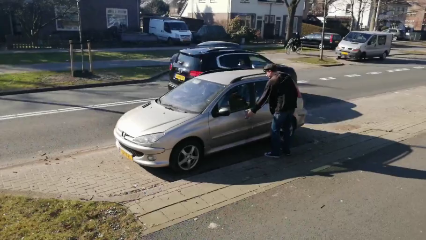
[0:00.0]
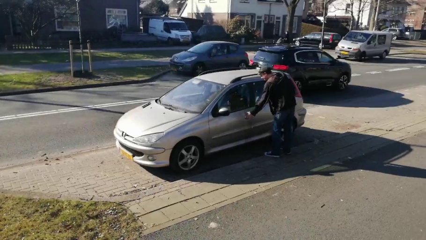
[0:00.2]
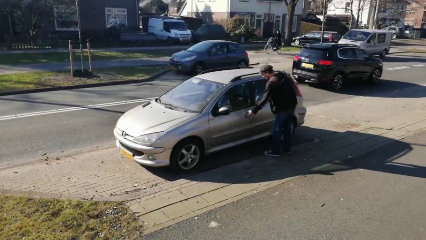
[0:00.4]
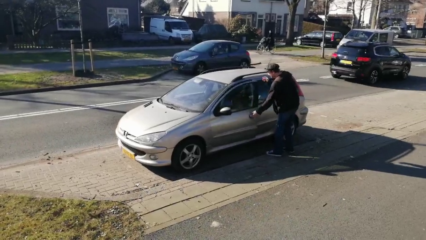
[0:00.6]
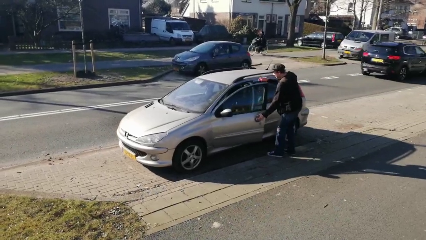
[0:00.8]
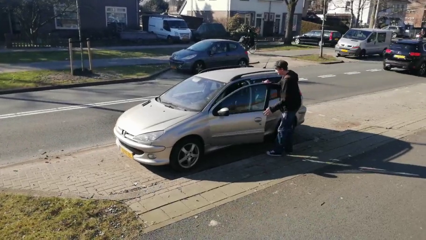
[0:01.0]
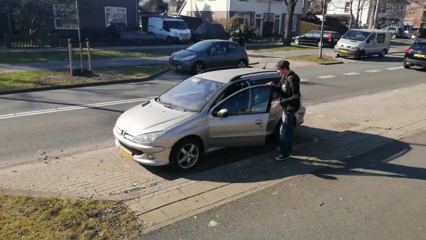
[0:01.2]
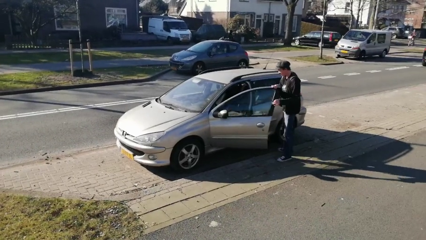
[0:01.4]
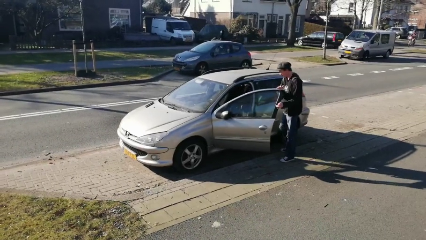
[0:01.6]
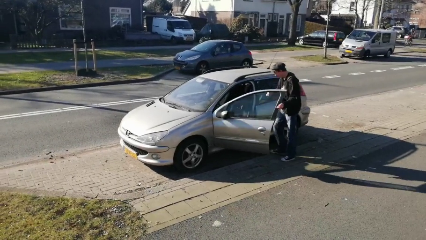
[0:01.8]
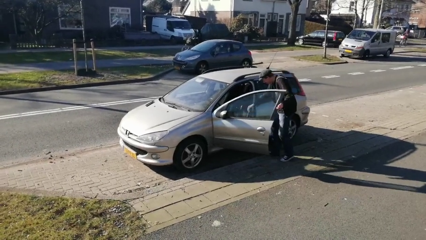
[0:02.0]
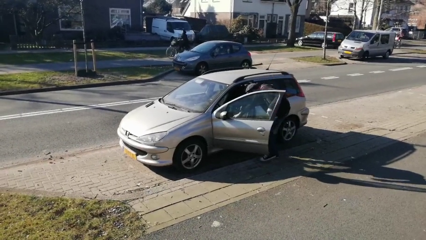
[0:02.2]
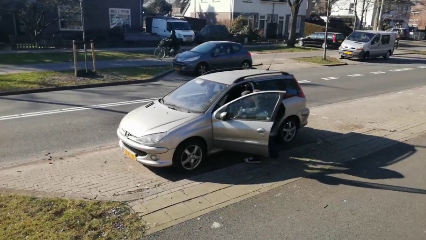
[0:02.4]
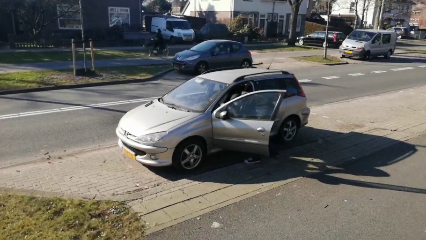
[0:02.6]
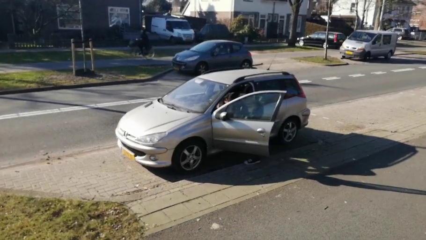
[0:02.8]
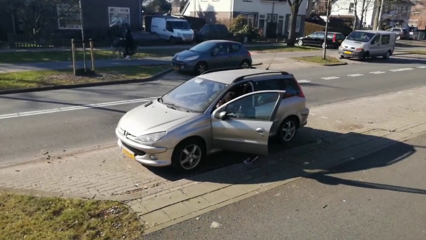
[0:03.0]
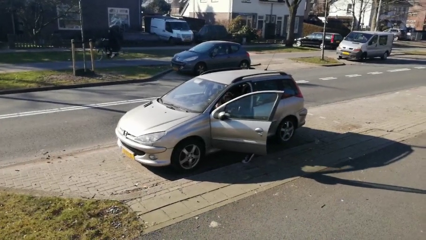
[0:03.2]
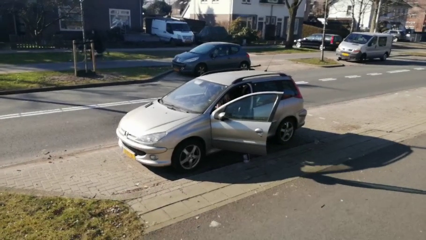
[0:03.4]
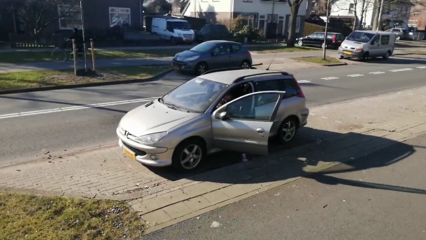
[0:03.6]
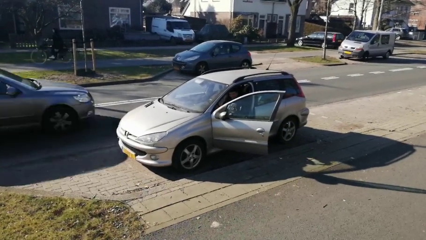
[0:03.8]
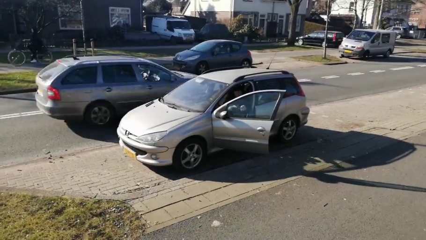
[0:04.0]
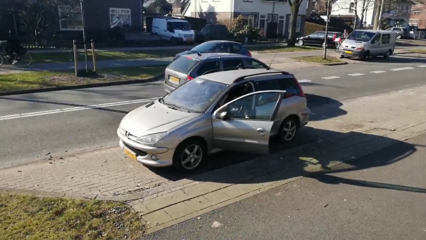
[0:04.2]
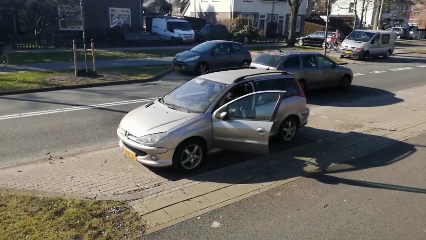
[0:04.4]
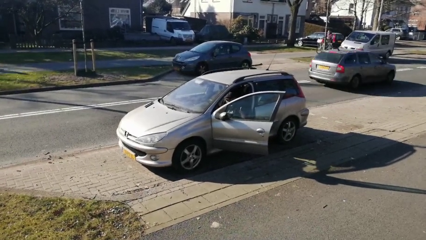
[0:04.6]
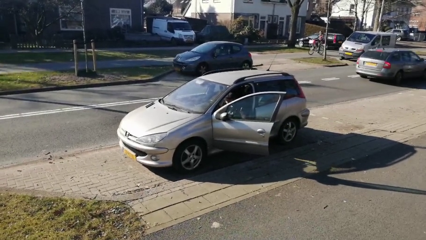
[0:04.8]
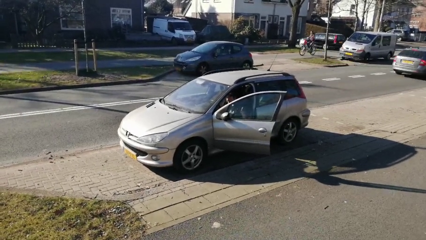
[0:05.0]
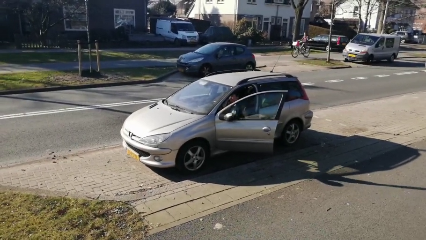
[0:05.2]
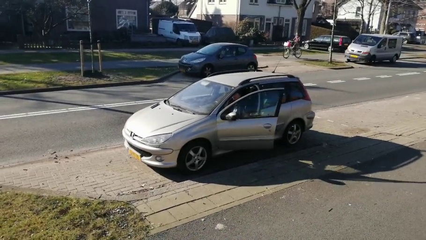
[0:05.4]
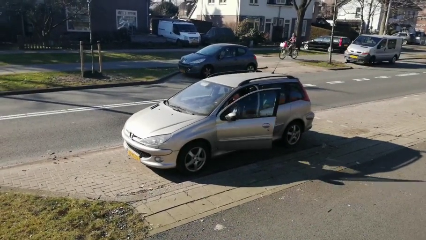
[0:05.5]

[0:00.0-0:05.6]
car picks up person

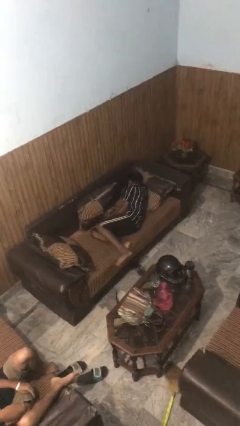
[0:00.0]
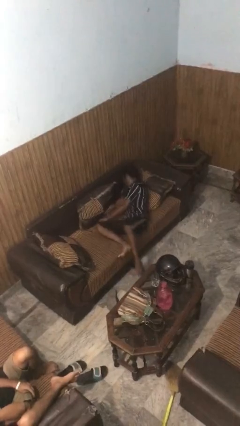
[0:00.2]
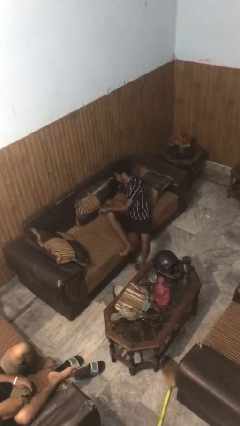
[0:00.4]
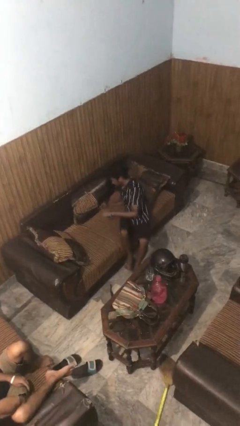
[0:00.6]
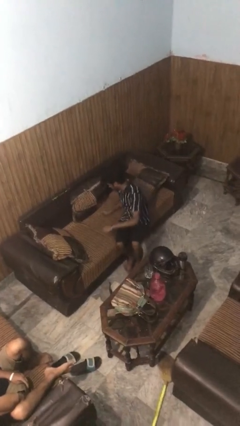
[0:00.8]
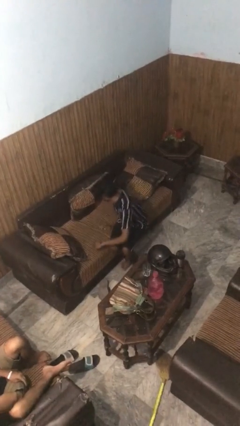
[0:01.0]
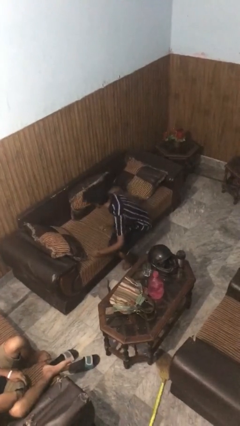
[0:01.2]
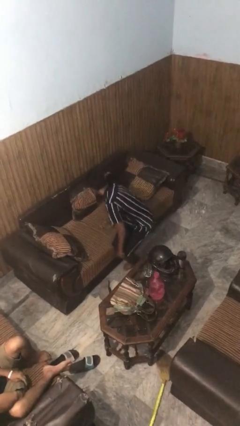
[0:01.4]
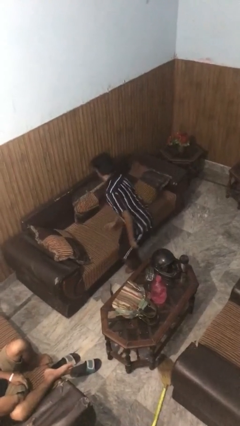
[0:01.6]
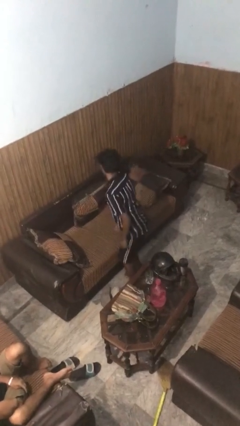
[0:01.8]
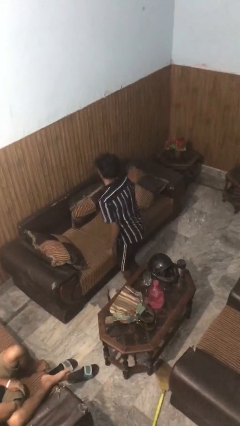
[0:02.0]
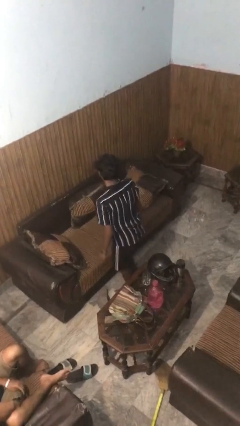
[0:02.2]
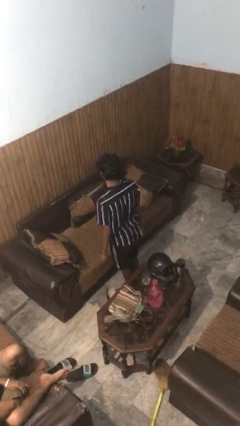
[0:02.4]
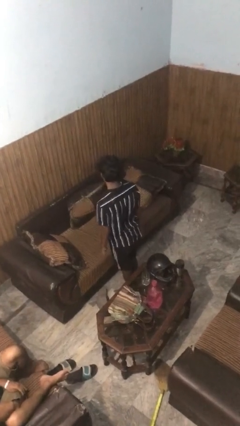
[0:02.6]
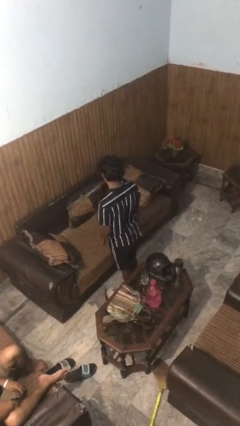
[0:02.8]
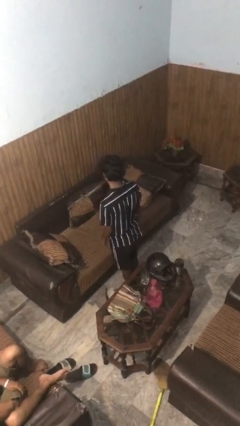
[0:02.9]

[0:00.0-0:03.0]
person stands up

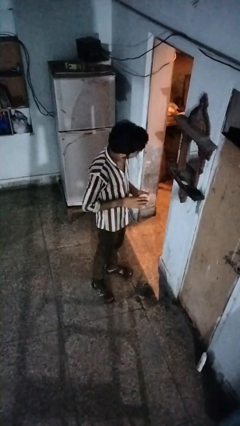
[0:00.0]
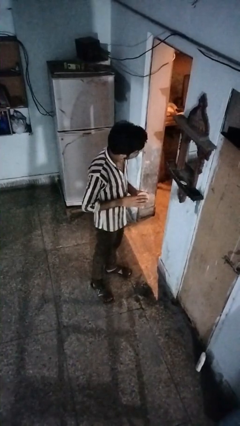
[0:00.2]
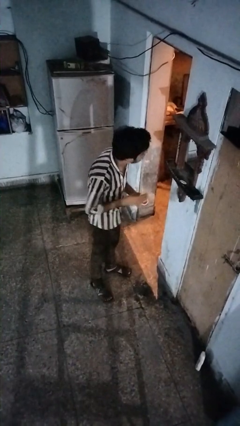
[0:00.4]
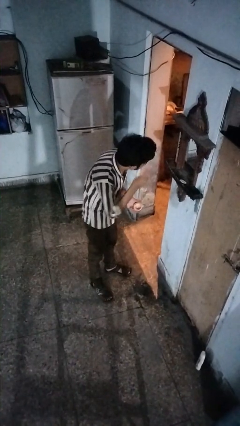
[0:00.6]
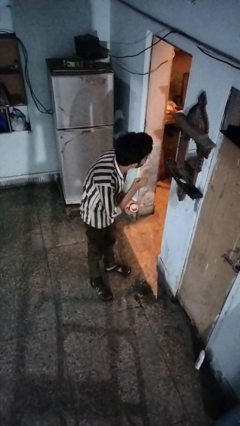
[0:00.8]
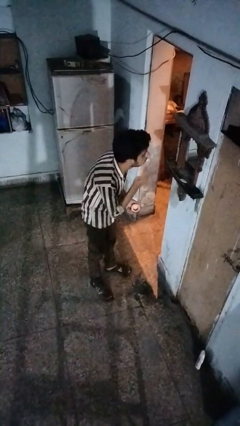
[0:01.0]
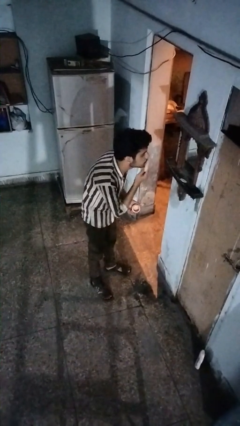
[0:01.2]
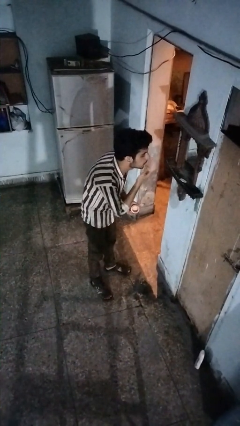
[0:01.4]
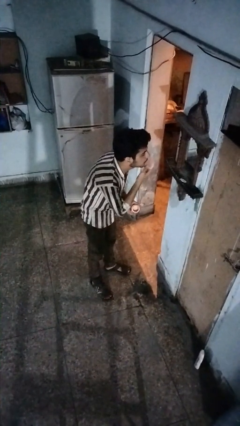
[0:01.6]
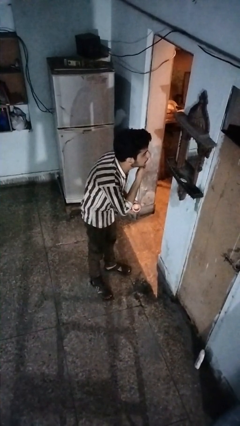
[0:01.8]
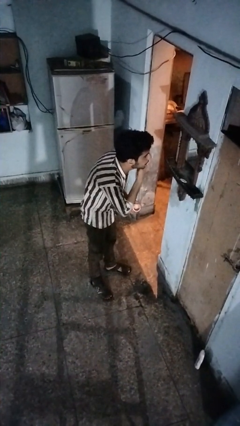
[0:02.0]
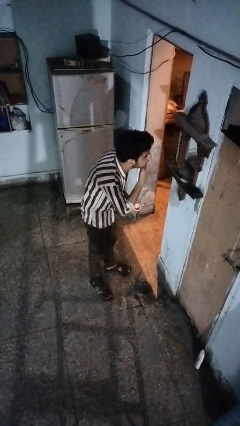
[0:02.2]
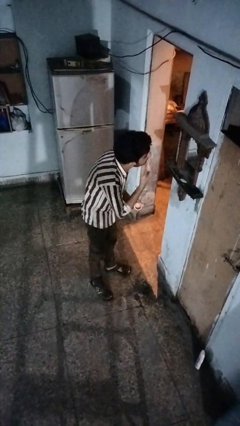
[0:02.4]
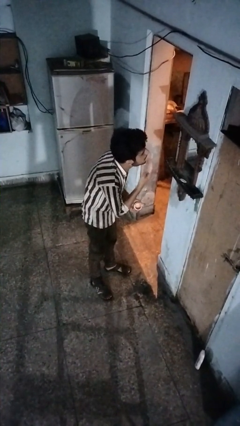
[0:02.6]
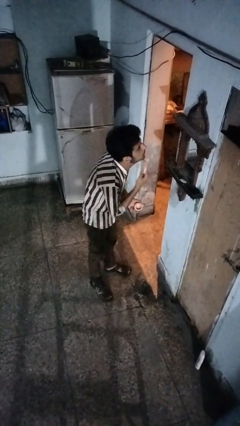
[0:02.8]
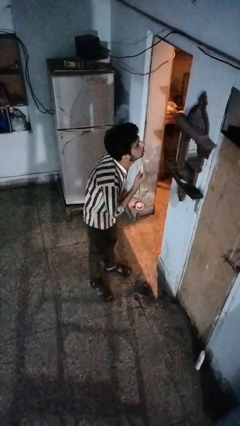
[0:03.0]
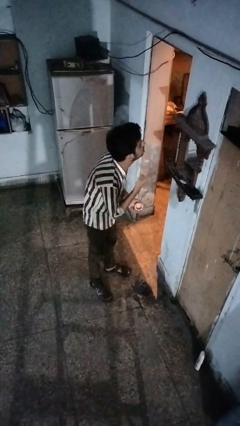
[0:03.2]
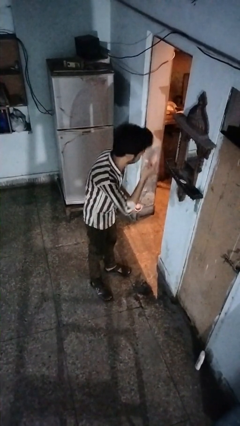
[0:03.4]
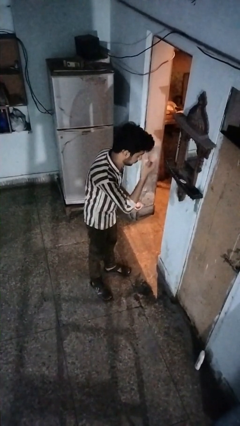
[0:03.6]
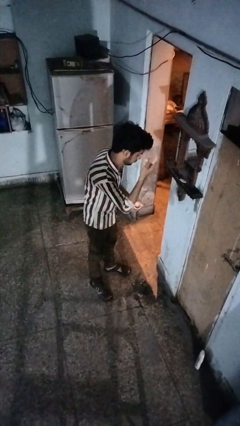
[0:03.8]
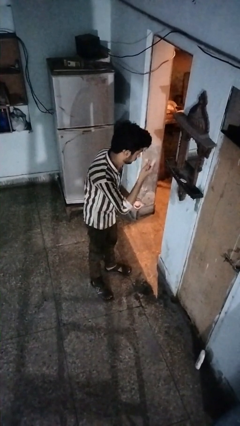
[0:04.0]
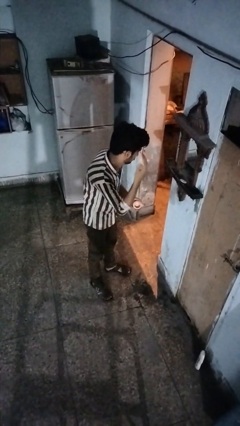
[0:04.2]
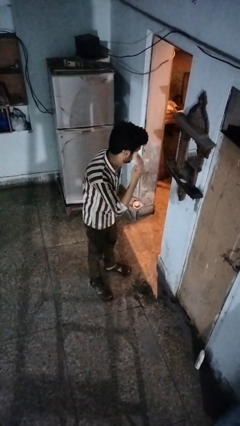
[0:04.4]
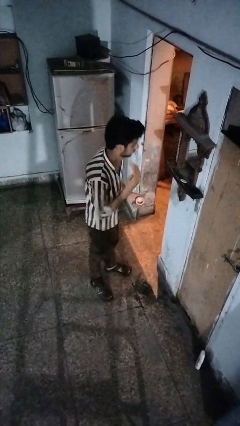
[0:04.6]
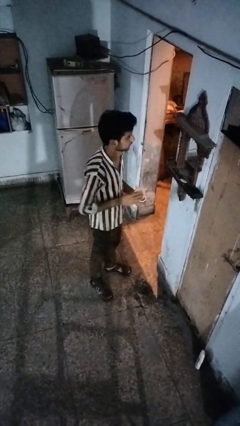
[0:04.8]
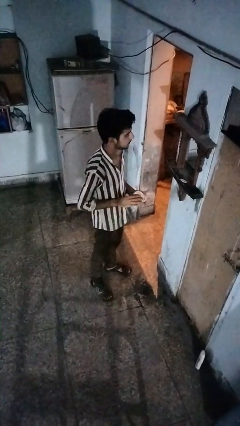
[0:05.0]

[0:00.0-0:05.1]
person applies foundation makeup

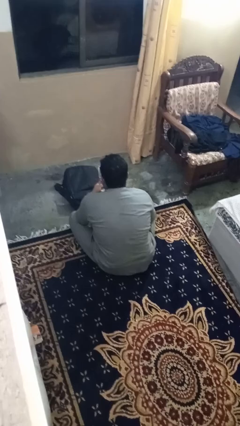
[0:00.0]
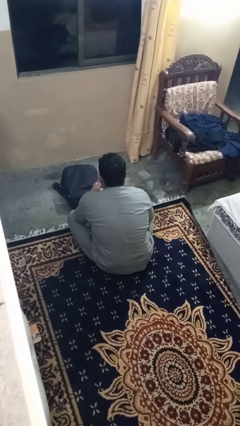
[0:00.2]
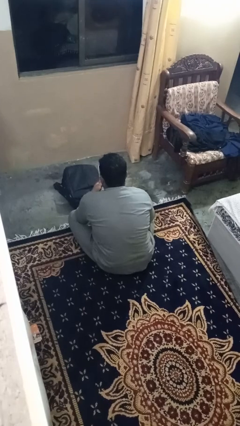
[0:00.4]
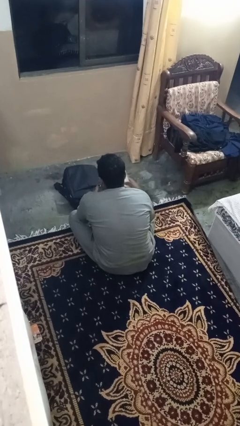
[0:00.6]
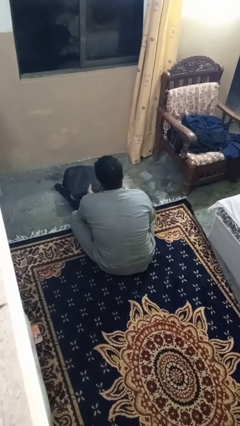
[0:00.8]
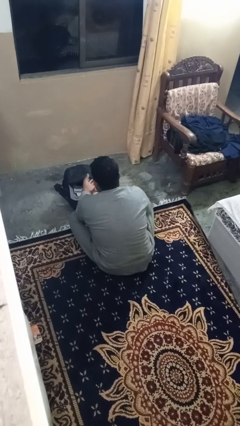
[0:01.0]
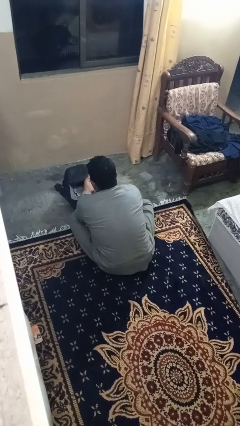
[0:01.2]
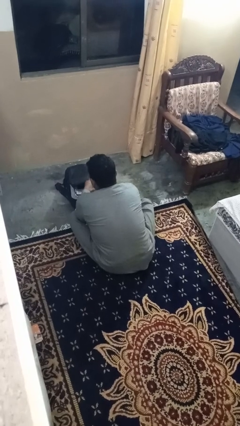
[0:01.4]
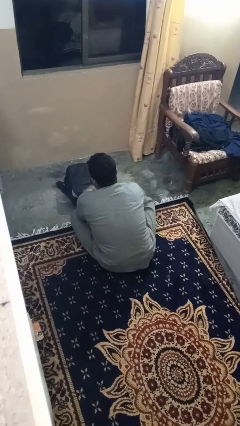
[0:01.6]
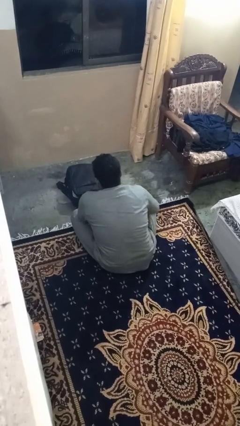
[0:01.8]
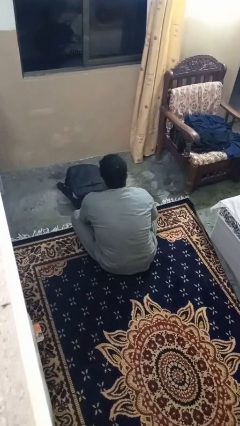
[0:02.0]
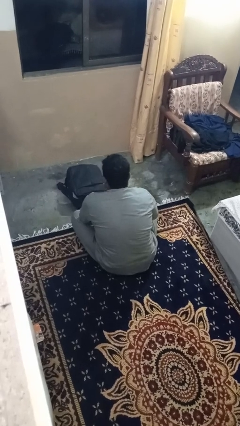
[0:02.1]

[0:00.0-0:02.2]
person puts object into bag

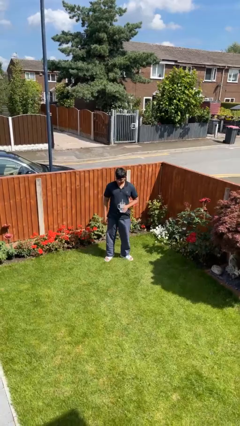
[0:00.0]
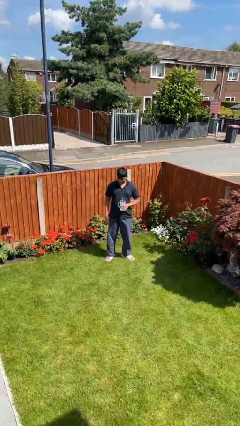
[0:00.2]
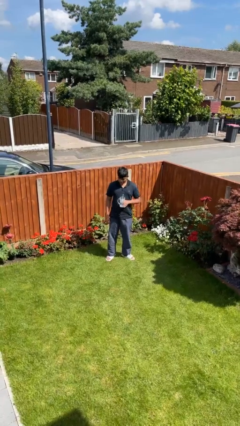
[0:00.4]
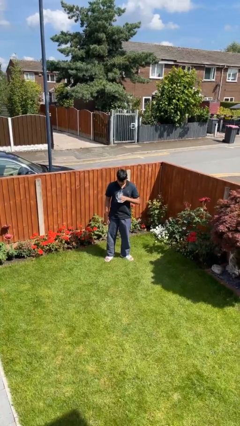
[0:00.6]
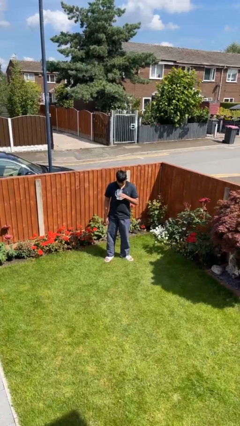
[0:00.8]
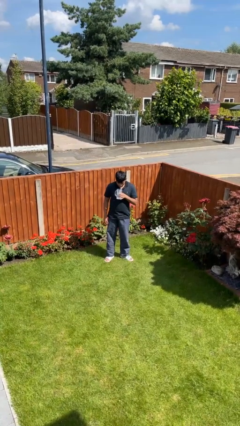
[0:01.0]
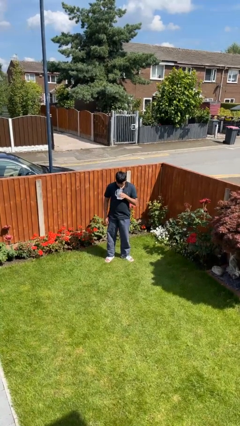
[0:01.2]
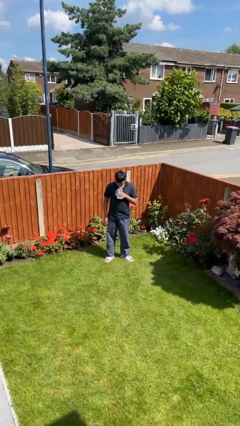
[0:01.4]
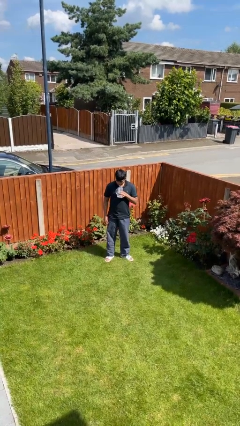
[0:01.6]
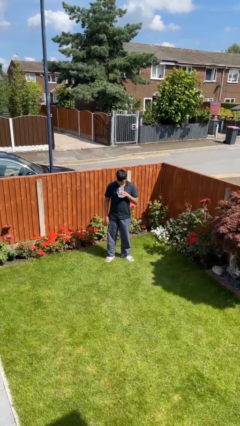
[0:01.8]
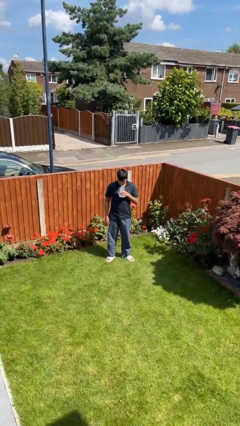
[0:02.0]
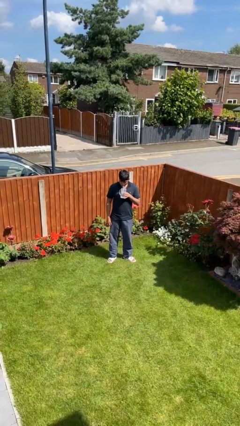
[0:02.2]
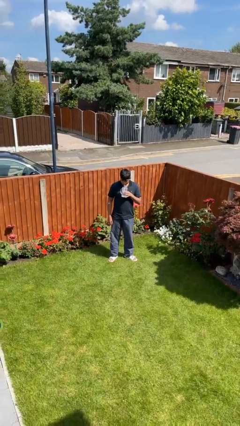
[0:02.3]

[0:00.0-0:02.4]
person drinks from straw
